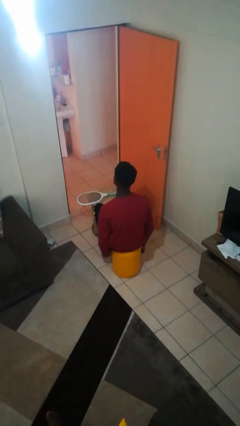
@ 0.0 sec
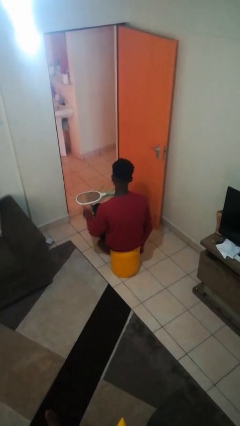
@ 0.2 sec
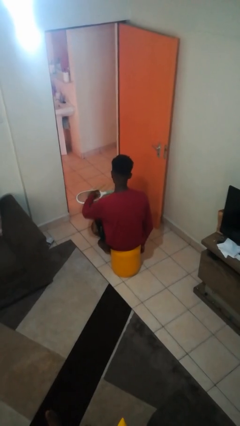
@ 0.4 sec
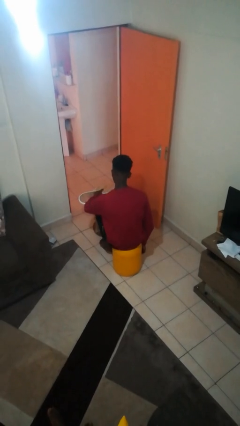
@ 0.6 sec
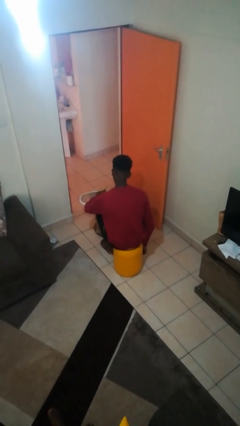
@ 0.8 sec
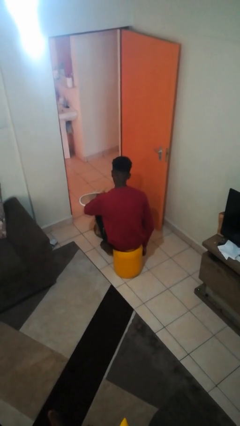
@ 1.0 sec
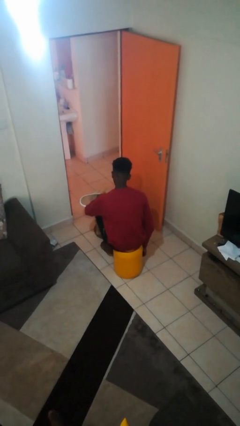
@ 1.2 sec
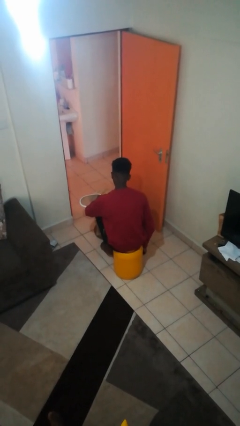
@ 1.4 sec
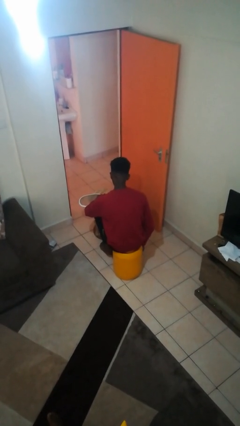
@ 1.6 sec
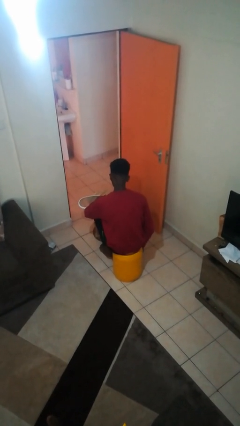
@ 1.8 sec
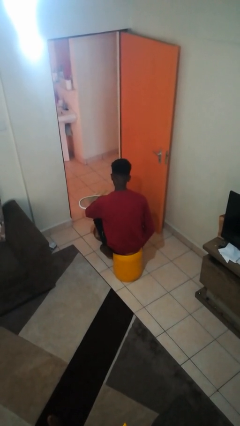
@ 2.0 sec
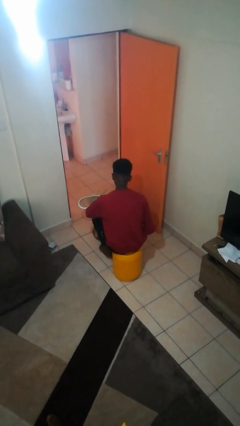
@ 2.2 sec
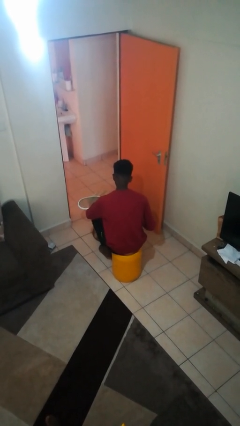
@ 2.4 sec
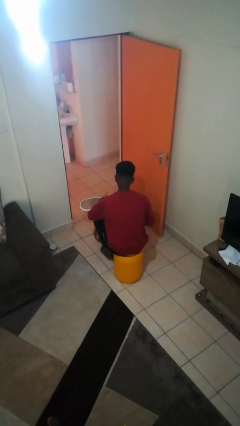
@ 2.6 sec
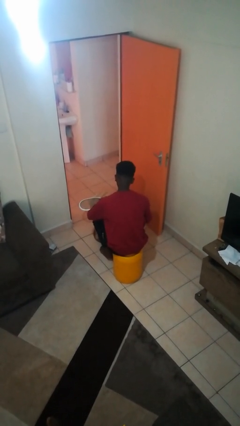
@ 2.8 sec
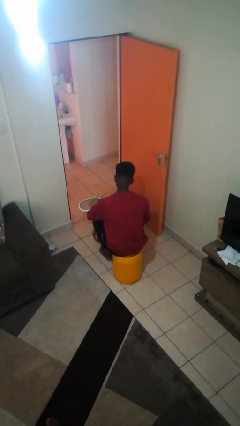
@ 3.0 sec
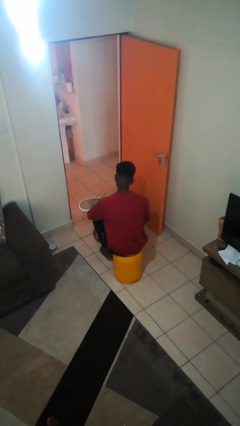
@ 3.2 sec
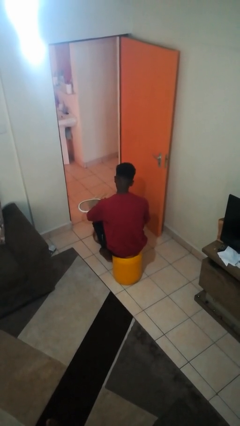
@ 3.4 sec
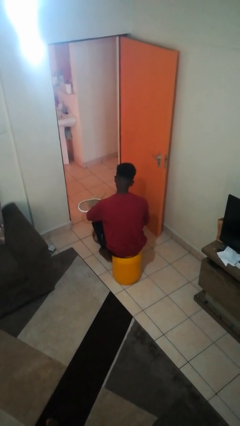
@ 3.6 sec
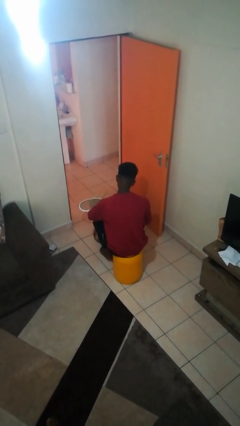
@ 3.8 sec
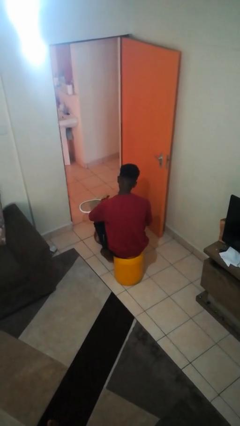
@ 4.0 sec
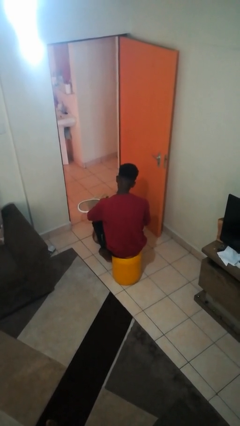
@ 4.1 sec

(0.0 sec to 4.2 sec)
person taps object with finger

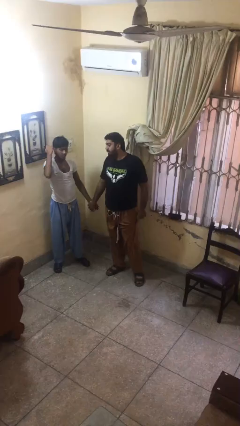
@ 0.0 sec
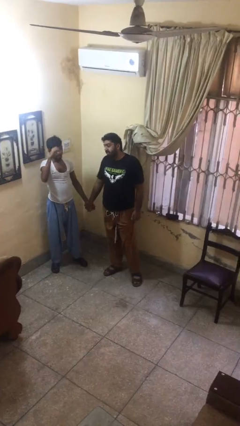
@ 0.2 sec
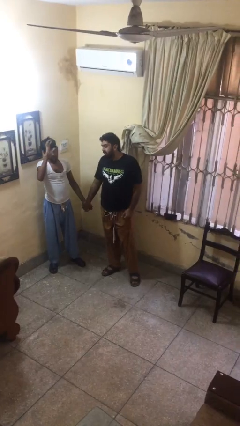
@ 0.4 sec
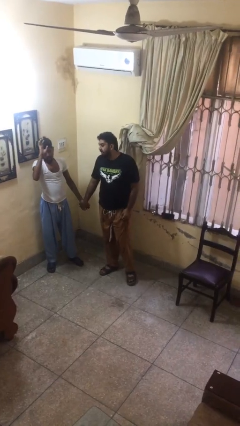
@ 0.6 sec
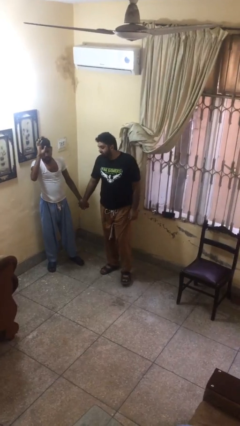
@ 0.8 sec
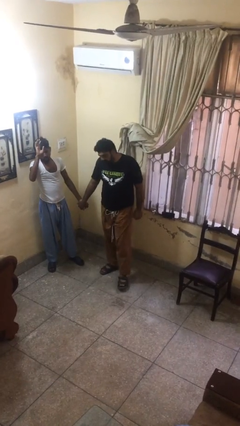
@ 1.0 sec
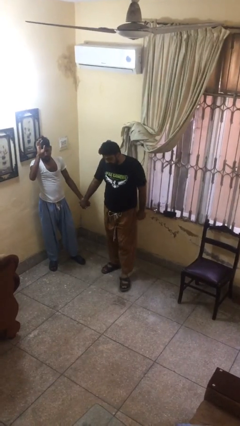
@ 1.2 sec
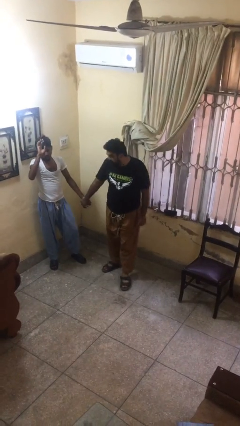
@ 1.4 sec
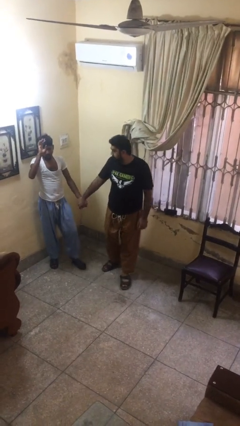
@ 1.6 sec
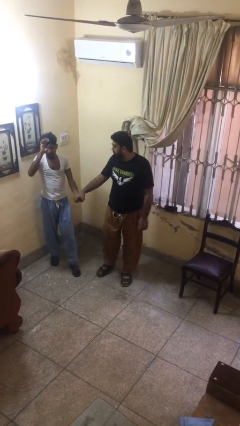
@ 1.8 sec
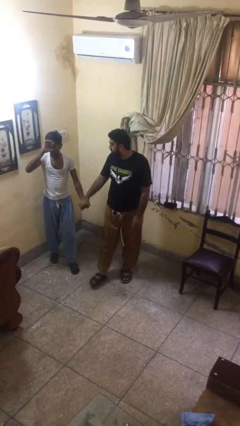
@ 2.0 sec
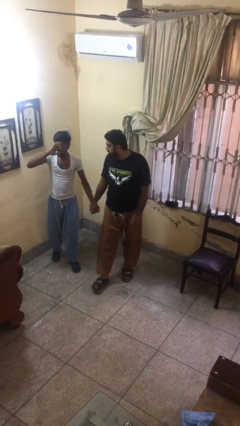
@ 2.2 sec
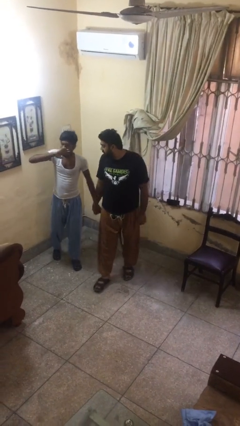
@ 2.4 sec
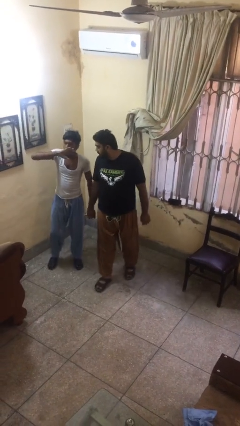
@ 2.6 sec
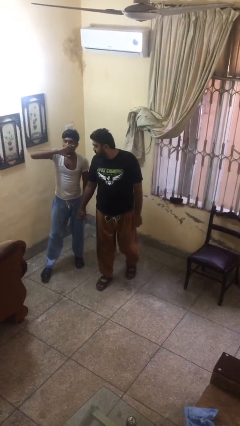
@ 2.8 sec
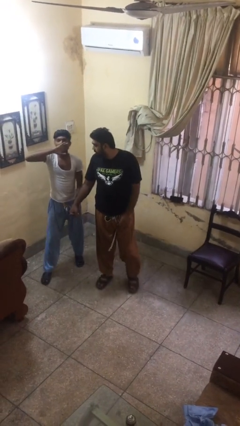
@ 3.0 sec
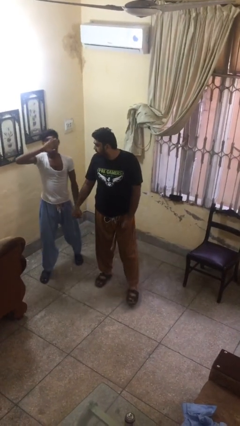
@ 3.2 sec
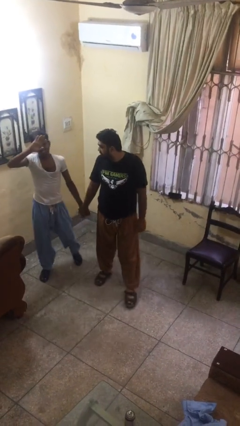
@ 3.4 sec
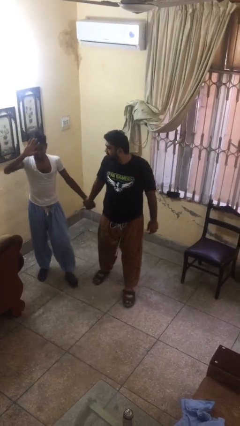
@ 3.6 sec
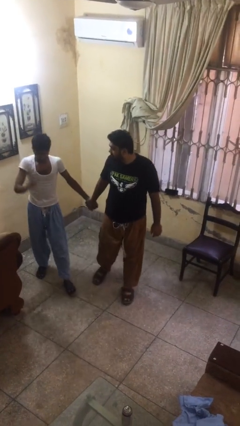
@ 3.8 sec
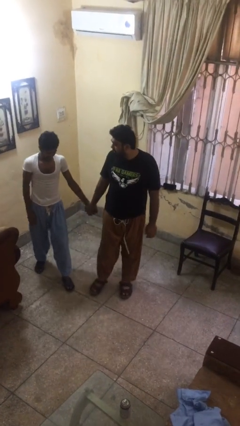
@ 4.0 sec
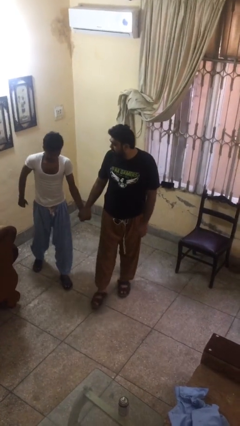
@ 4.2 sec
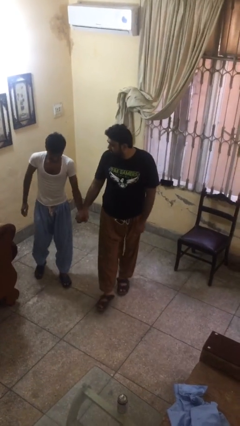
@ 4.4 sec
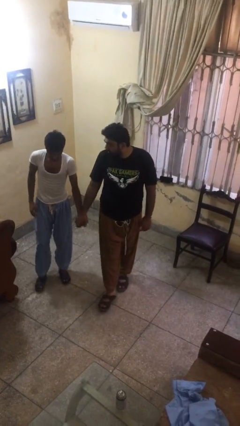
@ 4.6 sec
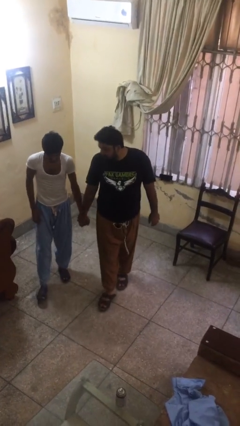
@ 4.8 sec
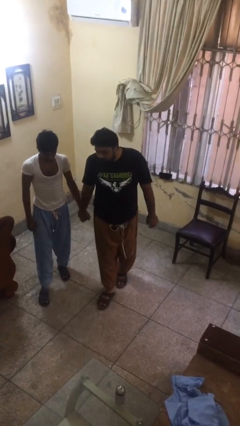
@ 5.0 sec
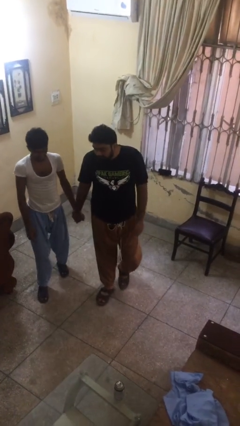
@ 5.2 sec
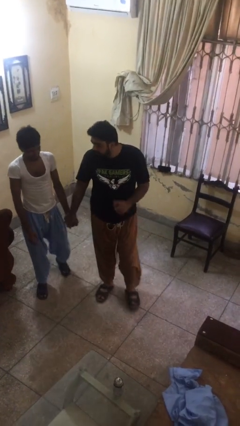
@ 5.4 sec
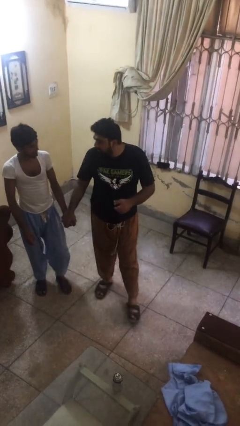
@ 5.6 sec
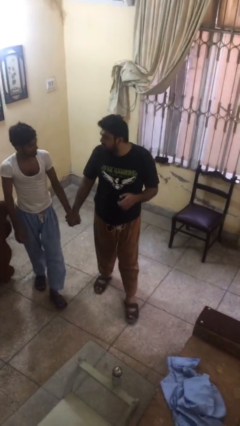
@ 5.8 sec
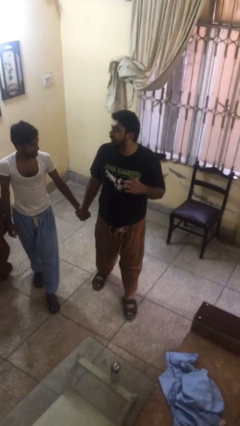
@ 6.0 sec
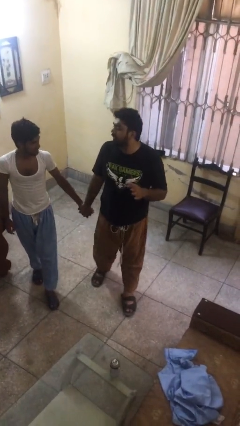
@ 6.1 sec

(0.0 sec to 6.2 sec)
person holds hand

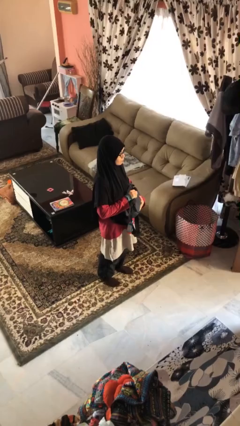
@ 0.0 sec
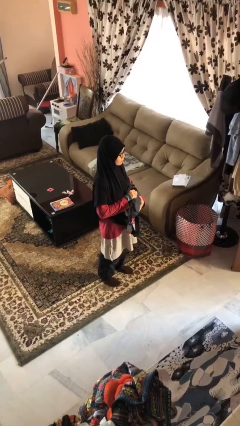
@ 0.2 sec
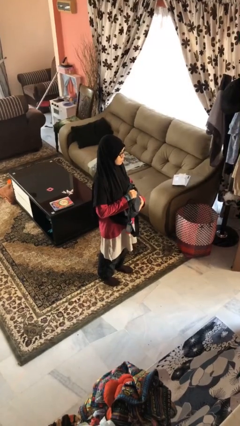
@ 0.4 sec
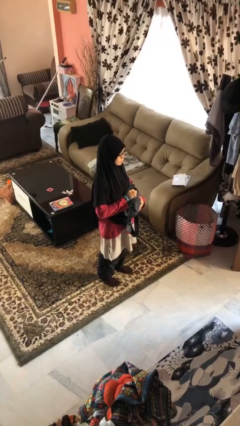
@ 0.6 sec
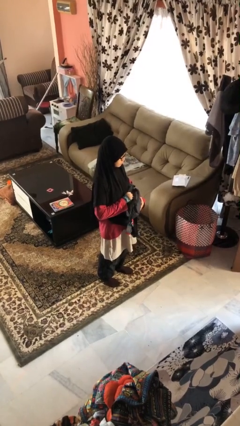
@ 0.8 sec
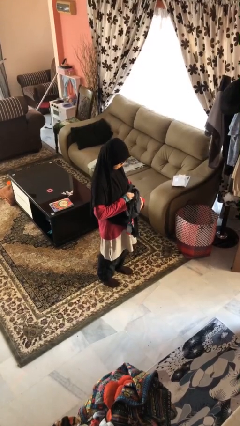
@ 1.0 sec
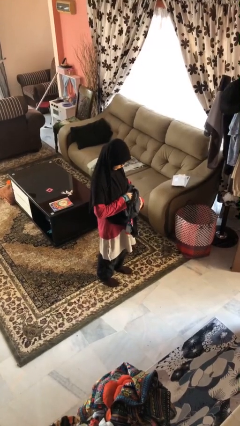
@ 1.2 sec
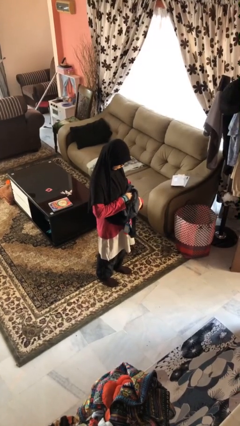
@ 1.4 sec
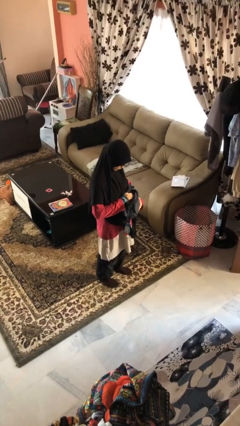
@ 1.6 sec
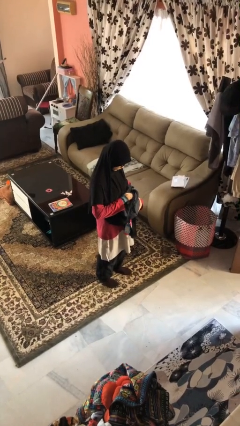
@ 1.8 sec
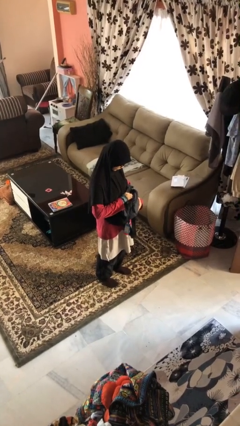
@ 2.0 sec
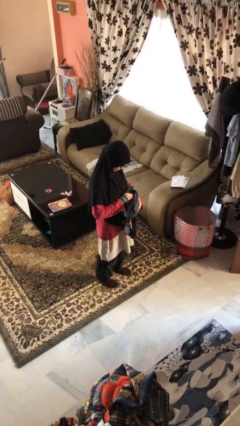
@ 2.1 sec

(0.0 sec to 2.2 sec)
person searches in purse

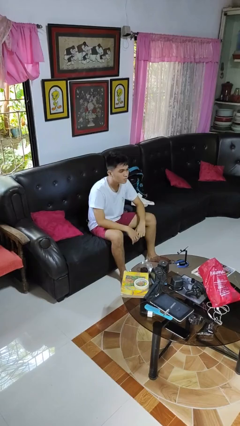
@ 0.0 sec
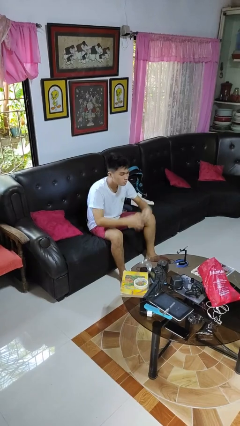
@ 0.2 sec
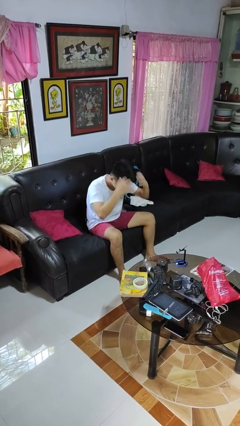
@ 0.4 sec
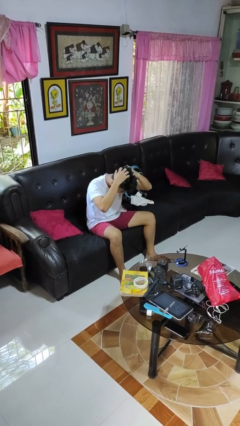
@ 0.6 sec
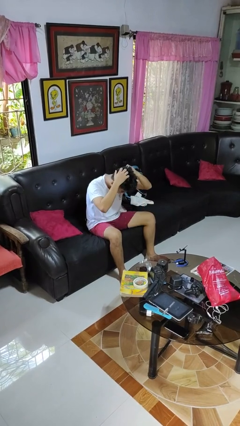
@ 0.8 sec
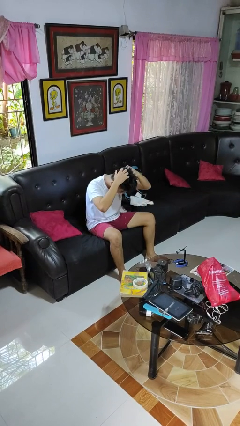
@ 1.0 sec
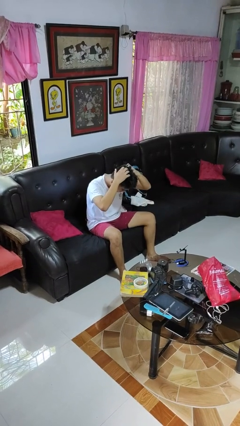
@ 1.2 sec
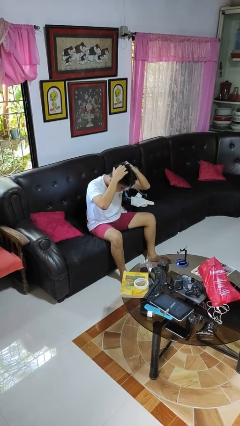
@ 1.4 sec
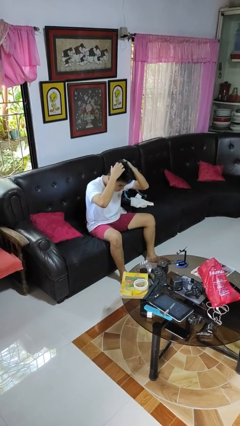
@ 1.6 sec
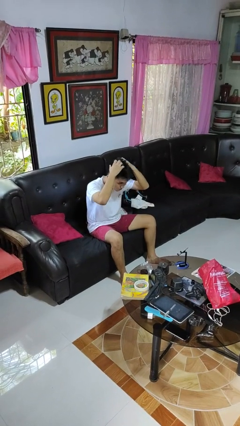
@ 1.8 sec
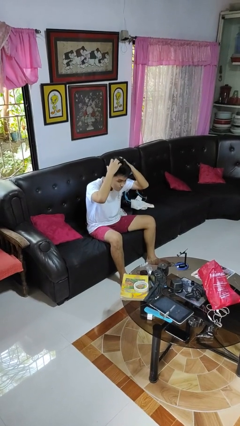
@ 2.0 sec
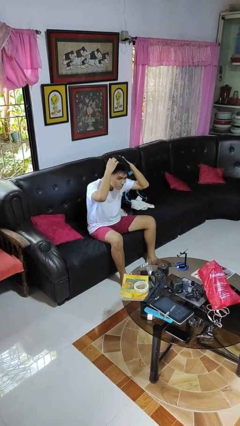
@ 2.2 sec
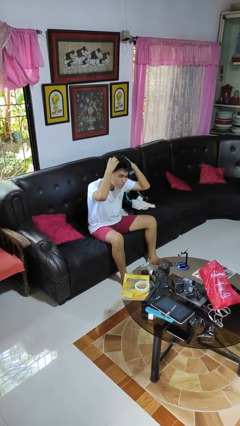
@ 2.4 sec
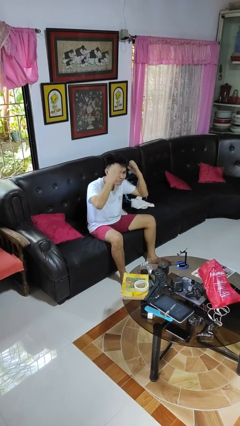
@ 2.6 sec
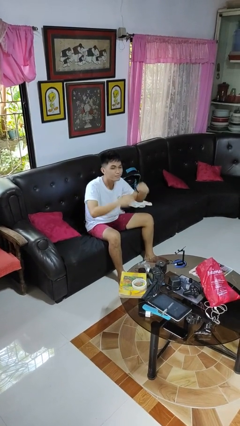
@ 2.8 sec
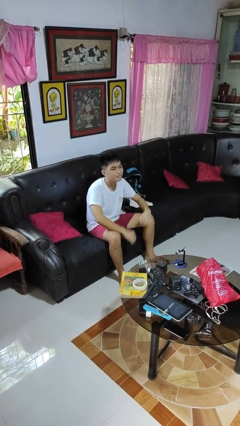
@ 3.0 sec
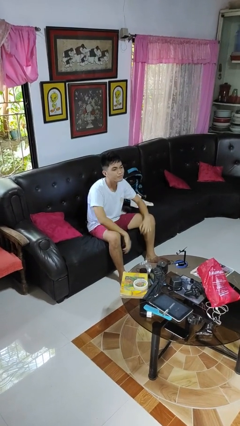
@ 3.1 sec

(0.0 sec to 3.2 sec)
person scratches face

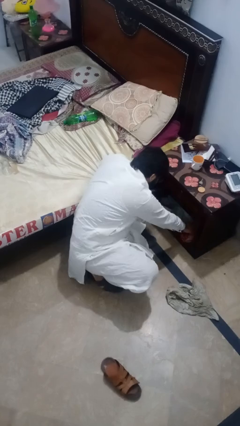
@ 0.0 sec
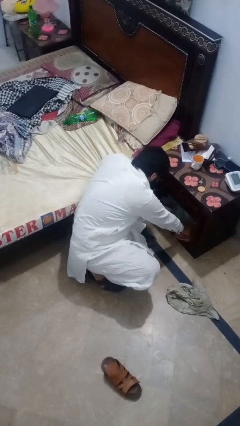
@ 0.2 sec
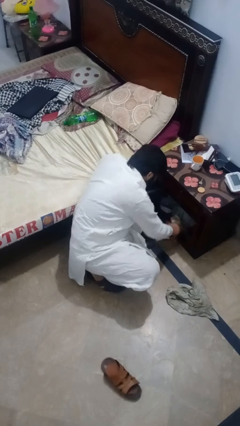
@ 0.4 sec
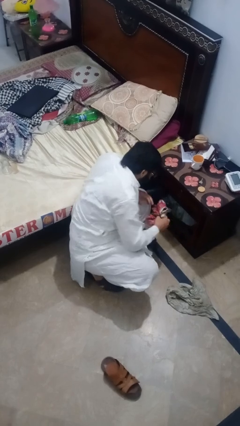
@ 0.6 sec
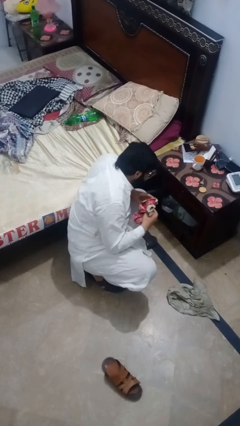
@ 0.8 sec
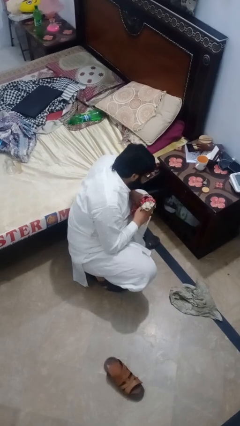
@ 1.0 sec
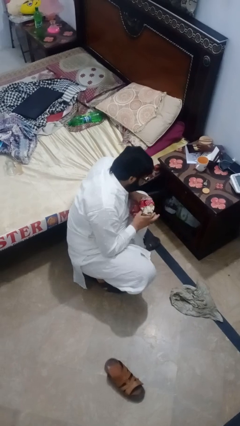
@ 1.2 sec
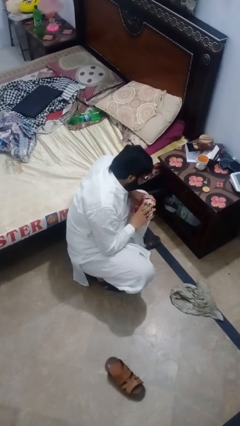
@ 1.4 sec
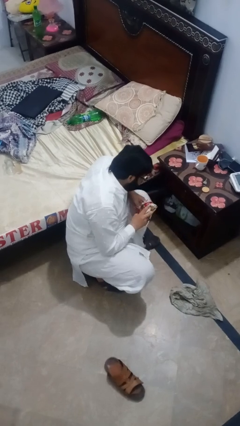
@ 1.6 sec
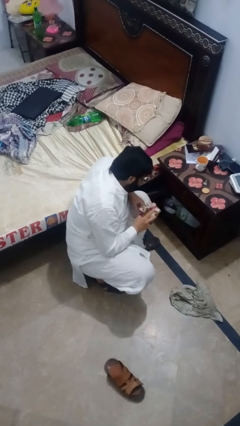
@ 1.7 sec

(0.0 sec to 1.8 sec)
person picks up object from cabinet
